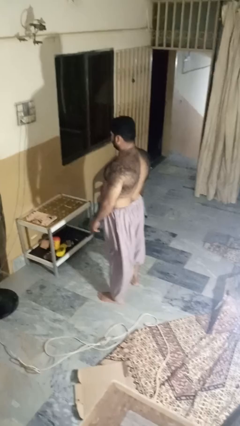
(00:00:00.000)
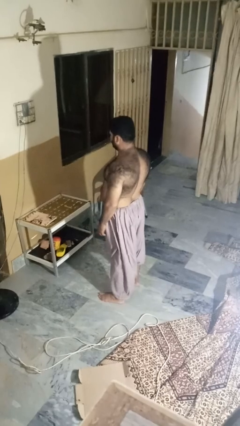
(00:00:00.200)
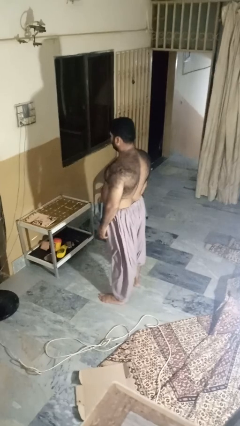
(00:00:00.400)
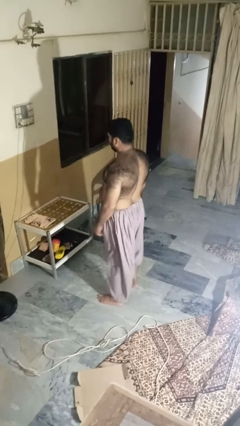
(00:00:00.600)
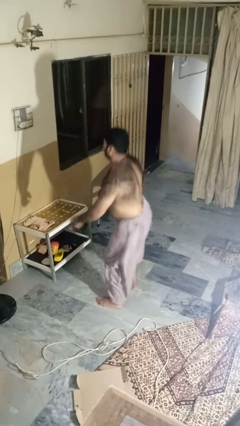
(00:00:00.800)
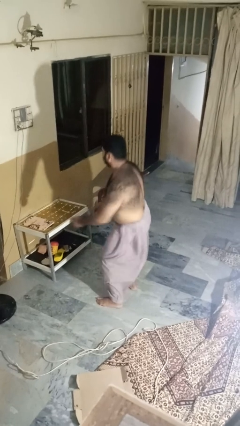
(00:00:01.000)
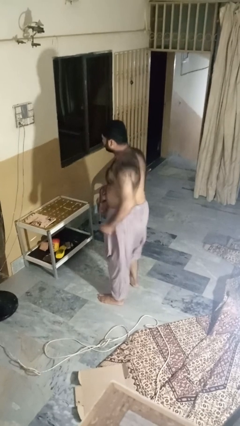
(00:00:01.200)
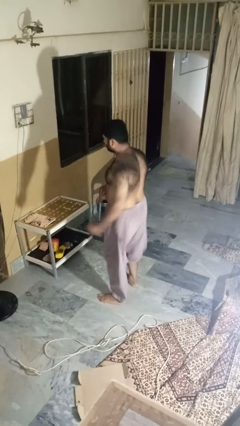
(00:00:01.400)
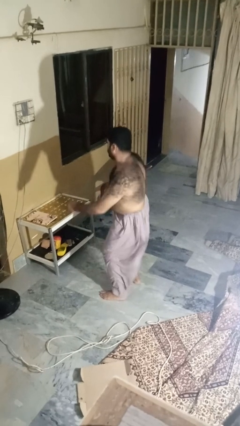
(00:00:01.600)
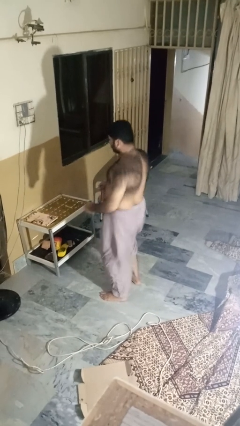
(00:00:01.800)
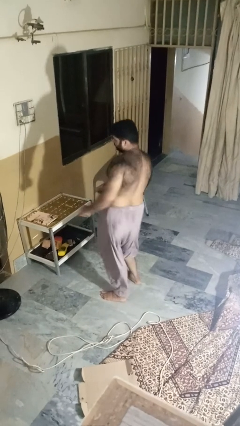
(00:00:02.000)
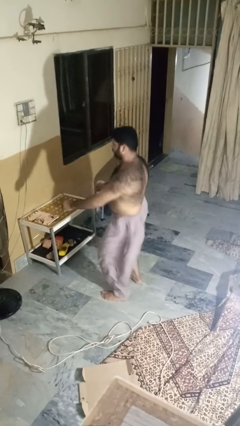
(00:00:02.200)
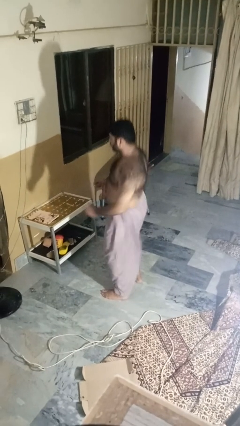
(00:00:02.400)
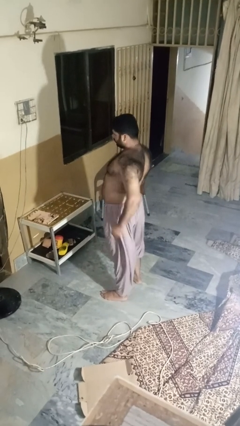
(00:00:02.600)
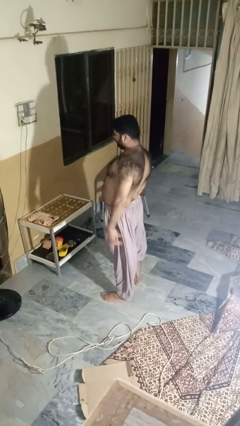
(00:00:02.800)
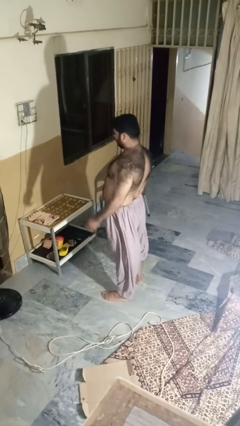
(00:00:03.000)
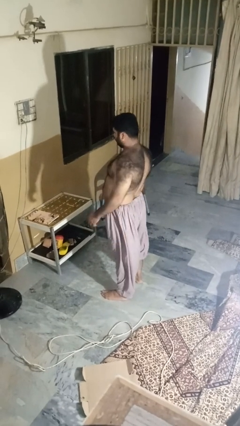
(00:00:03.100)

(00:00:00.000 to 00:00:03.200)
person dances in place

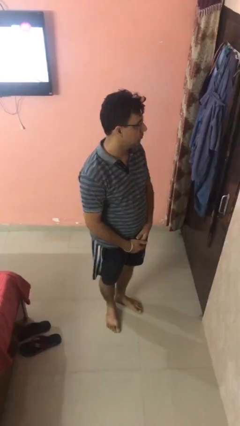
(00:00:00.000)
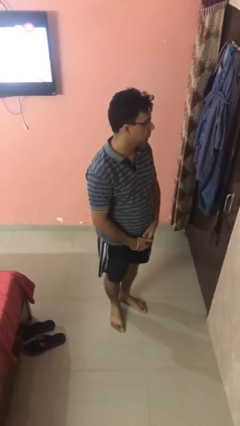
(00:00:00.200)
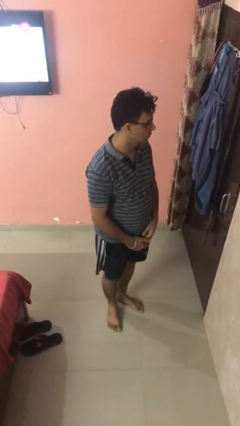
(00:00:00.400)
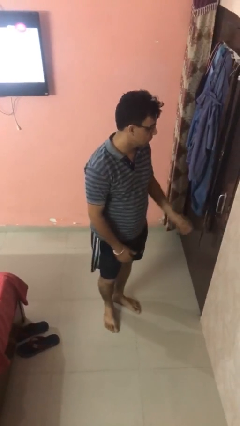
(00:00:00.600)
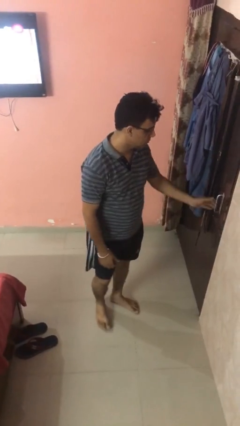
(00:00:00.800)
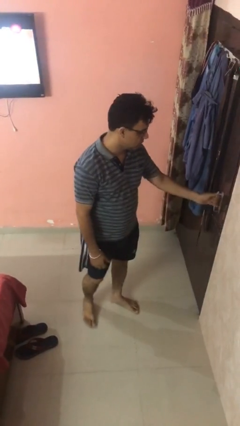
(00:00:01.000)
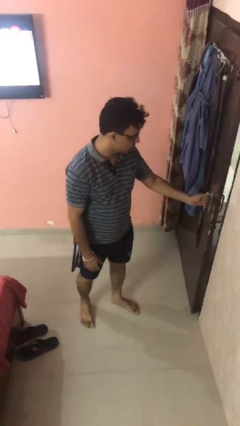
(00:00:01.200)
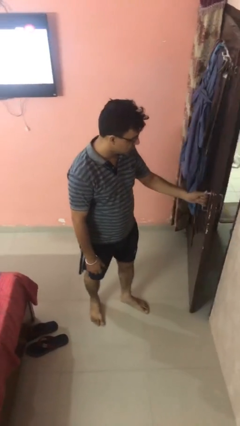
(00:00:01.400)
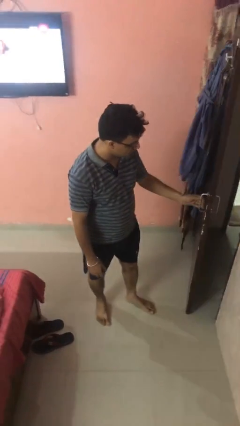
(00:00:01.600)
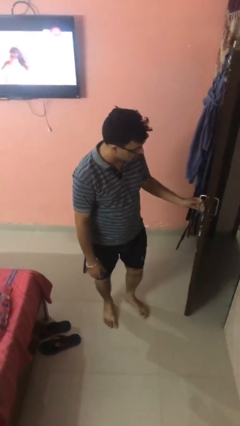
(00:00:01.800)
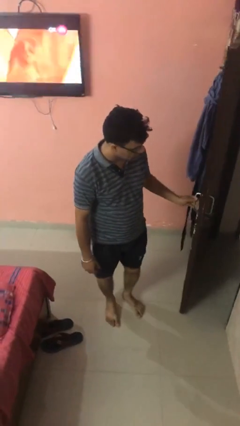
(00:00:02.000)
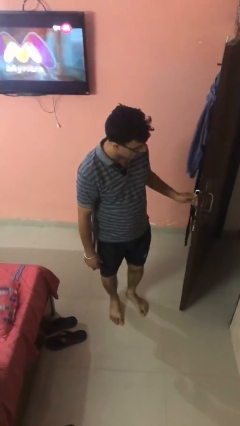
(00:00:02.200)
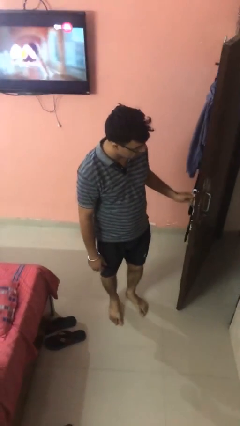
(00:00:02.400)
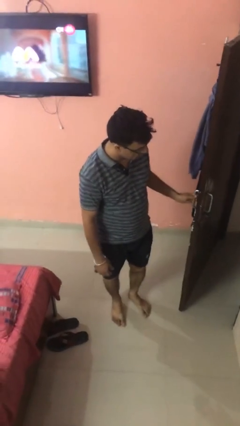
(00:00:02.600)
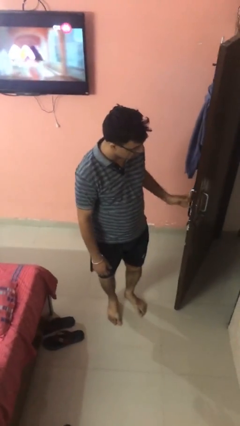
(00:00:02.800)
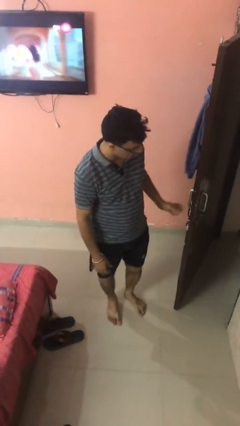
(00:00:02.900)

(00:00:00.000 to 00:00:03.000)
person opens facility door

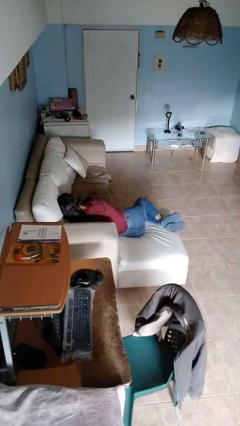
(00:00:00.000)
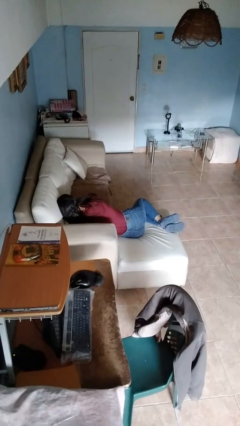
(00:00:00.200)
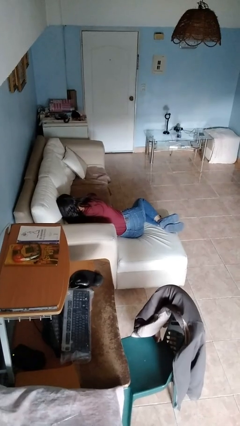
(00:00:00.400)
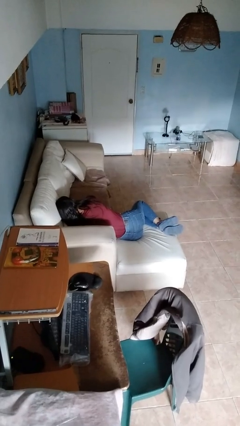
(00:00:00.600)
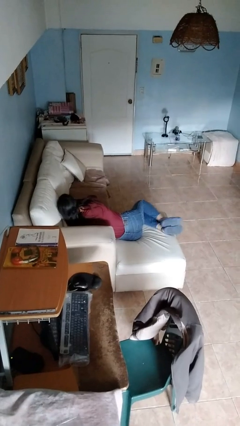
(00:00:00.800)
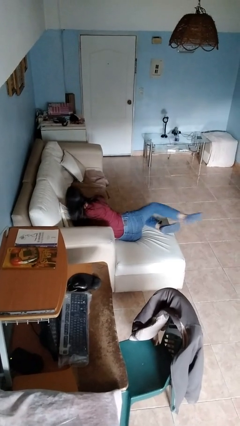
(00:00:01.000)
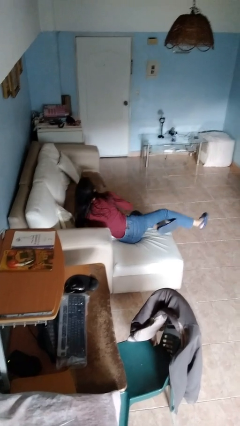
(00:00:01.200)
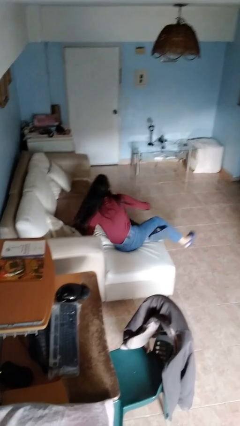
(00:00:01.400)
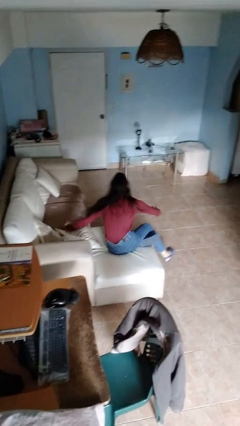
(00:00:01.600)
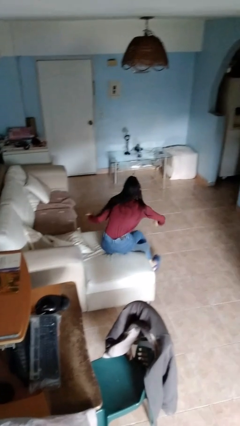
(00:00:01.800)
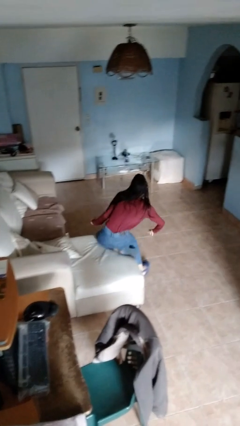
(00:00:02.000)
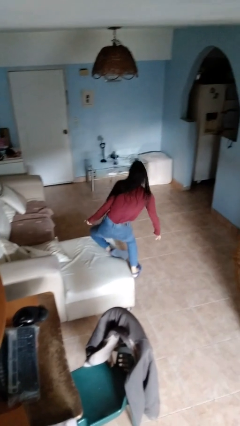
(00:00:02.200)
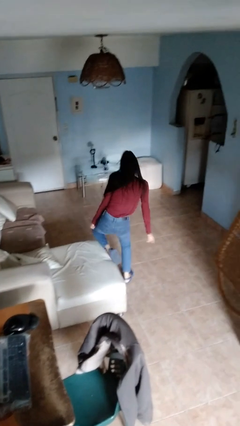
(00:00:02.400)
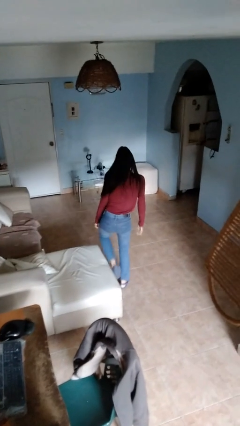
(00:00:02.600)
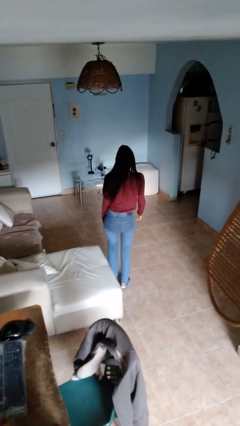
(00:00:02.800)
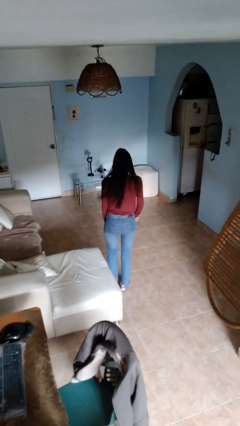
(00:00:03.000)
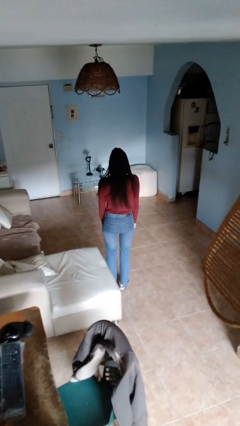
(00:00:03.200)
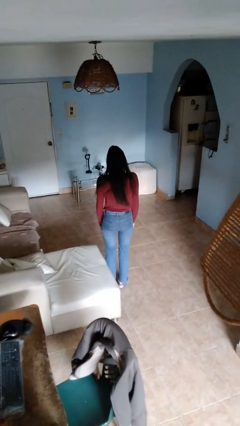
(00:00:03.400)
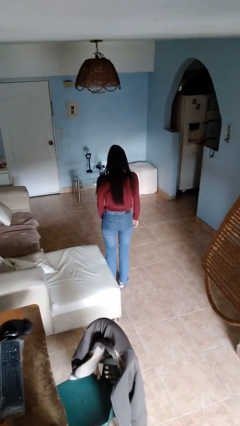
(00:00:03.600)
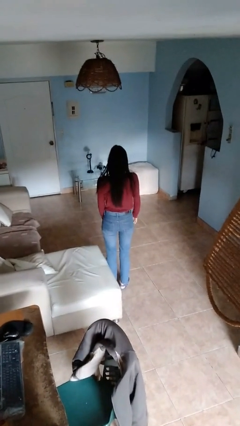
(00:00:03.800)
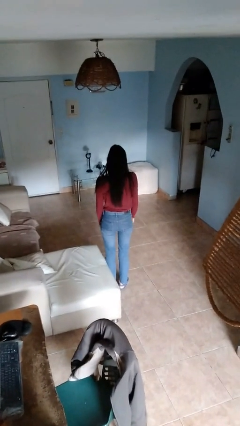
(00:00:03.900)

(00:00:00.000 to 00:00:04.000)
person stands up

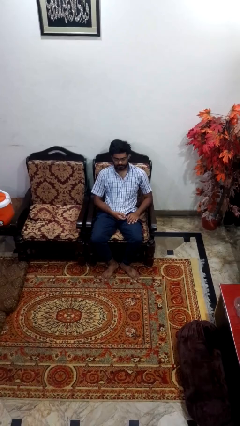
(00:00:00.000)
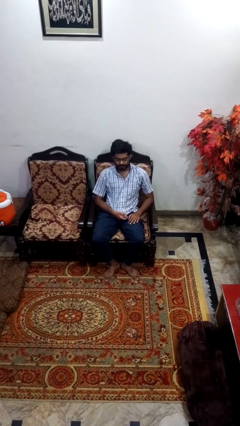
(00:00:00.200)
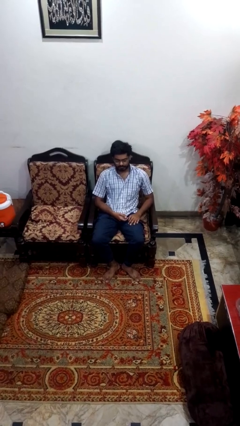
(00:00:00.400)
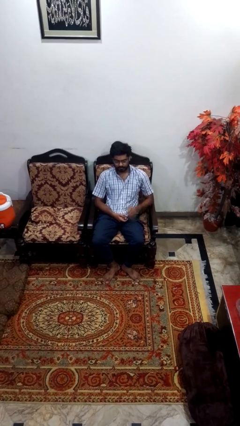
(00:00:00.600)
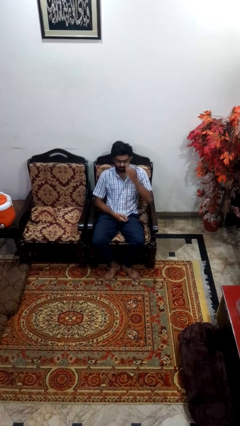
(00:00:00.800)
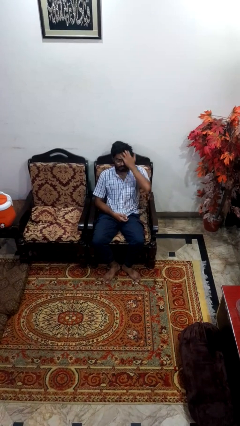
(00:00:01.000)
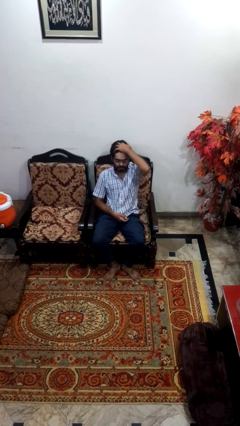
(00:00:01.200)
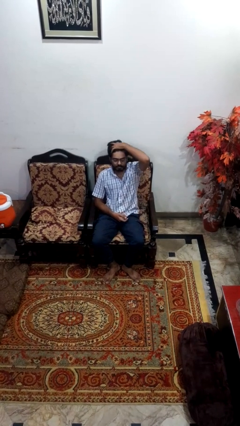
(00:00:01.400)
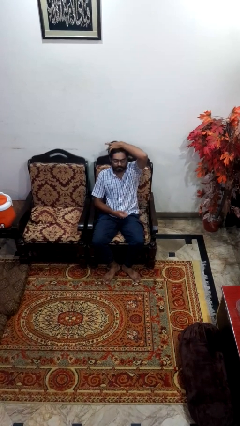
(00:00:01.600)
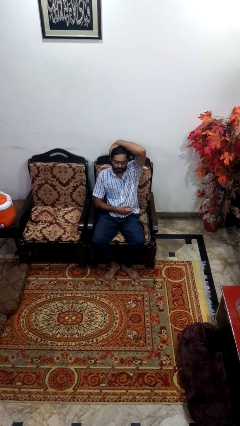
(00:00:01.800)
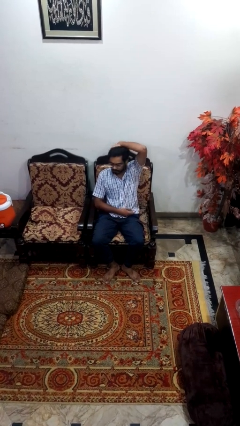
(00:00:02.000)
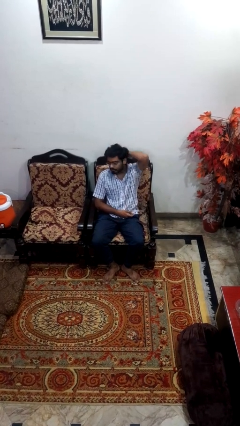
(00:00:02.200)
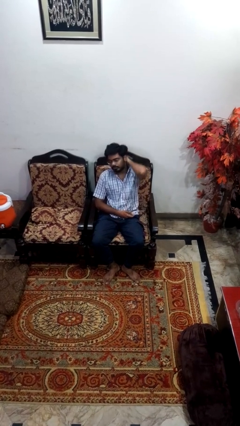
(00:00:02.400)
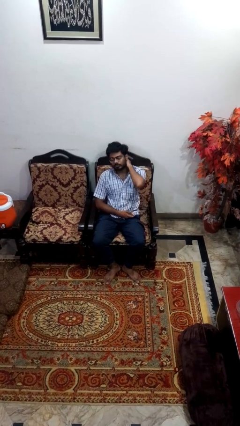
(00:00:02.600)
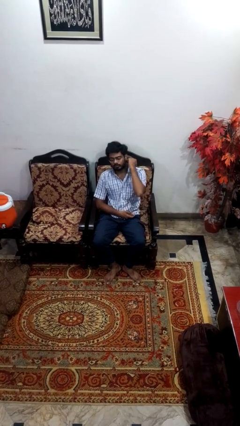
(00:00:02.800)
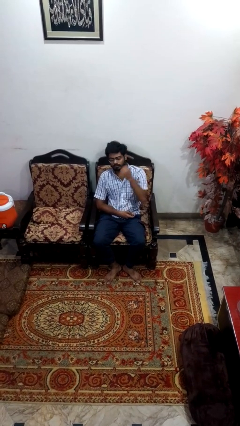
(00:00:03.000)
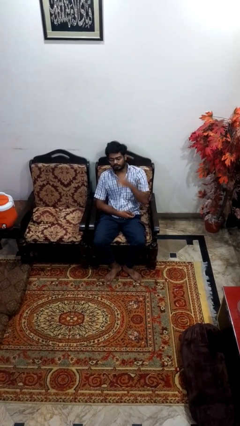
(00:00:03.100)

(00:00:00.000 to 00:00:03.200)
person strokes hair

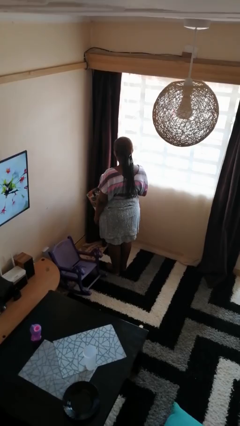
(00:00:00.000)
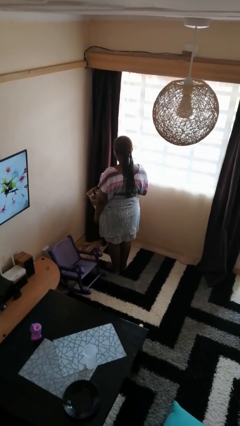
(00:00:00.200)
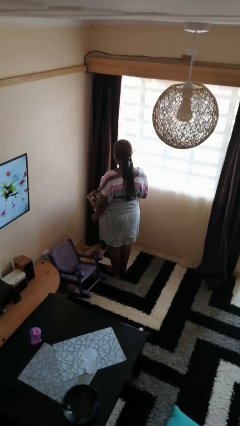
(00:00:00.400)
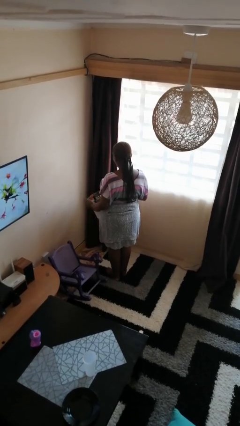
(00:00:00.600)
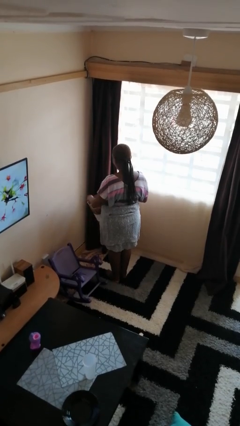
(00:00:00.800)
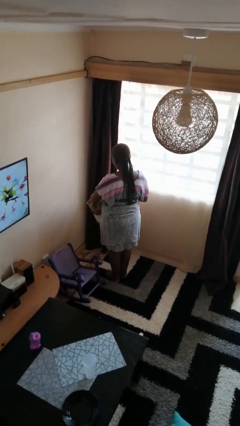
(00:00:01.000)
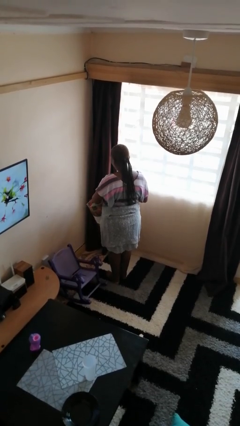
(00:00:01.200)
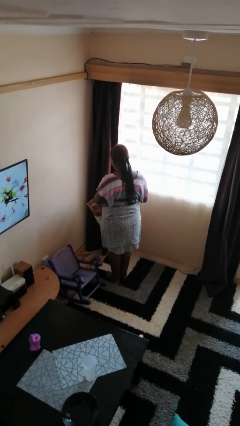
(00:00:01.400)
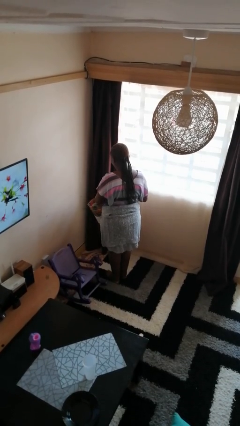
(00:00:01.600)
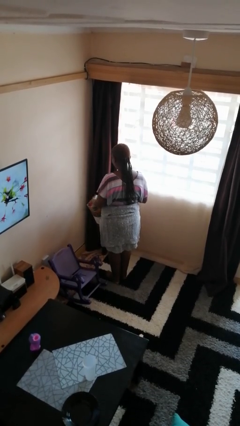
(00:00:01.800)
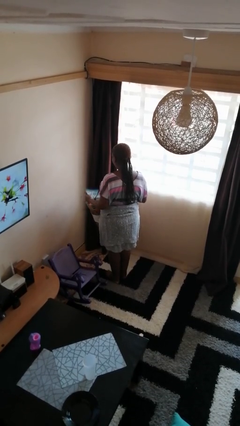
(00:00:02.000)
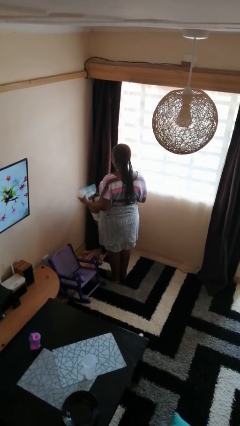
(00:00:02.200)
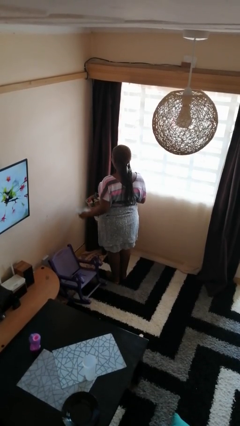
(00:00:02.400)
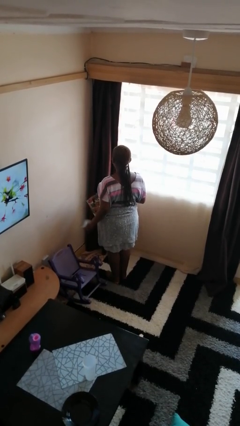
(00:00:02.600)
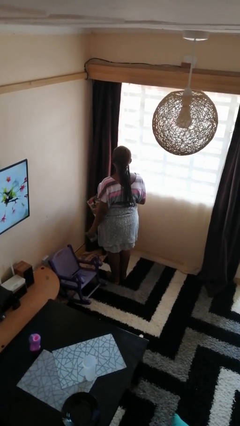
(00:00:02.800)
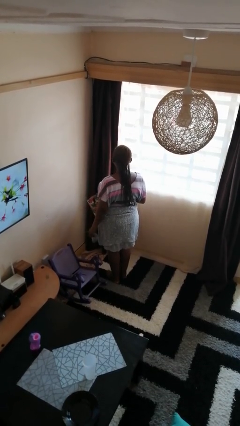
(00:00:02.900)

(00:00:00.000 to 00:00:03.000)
person takes object from bag

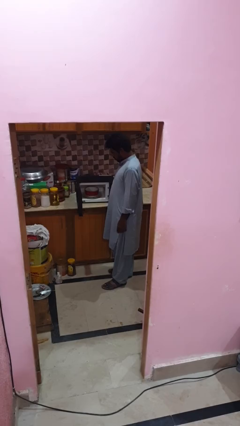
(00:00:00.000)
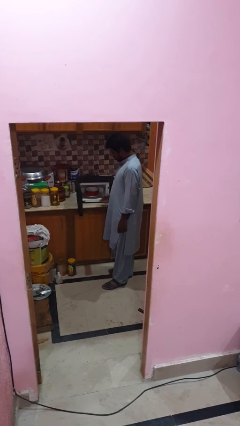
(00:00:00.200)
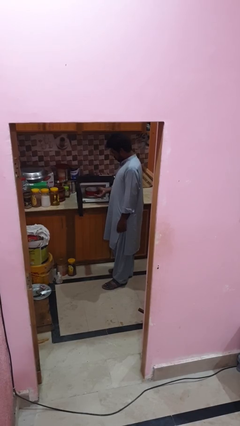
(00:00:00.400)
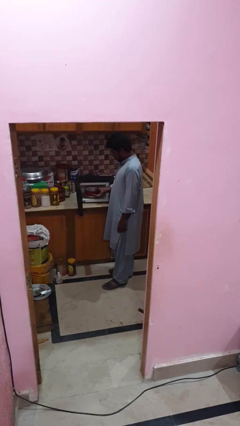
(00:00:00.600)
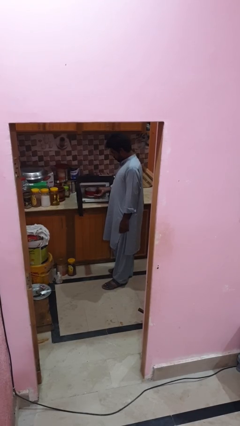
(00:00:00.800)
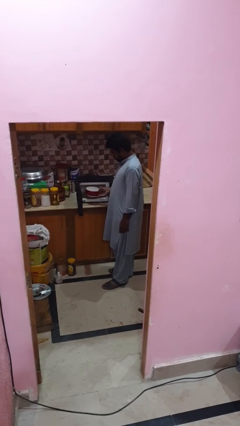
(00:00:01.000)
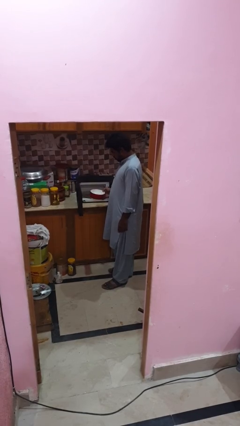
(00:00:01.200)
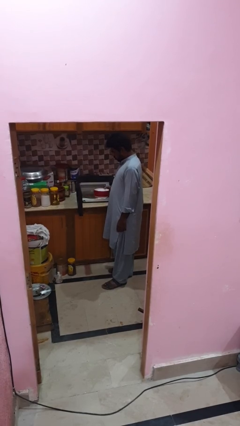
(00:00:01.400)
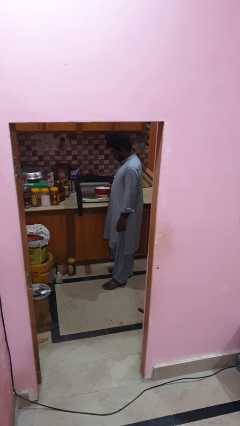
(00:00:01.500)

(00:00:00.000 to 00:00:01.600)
person takes object from microwave
